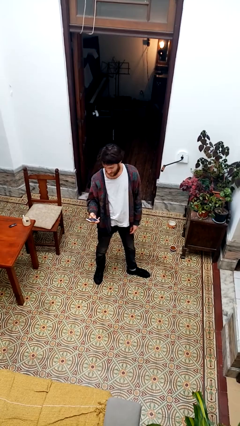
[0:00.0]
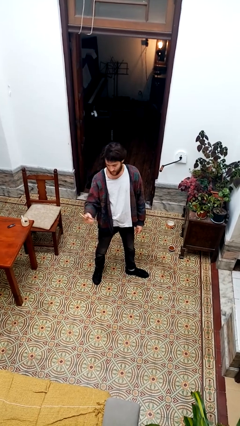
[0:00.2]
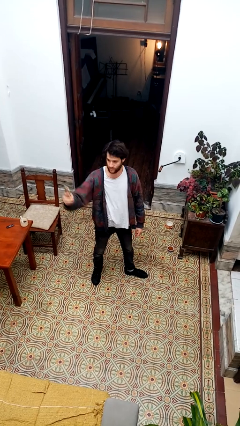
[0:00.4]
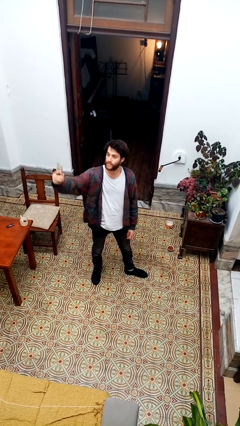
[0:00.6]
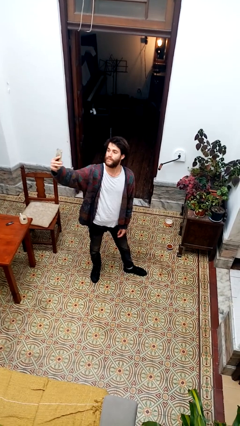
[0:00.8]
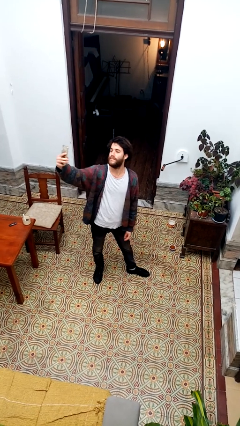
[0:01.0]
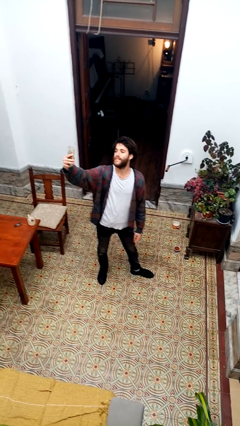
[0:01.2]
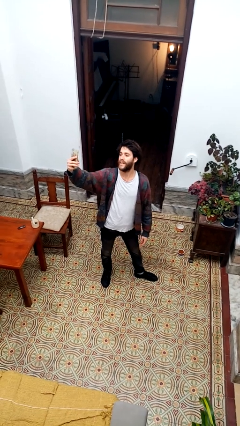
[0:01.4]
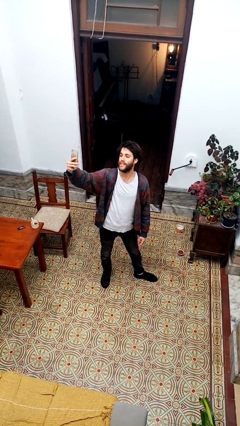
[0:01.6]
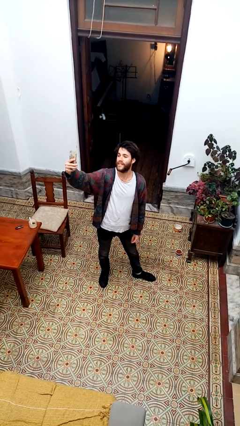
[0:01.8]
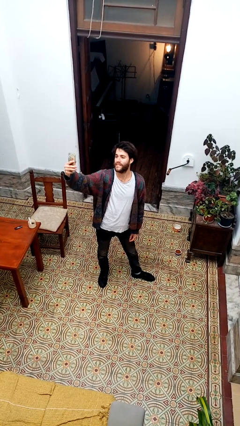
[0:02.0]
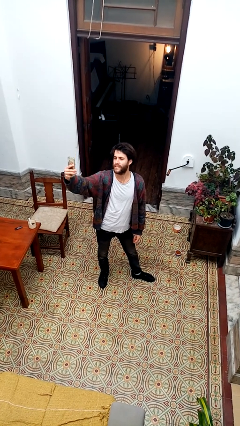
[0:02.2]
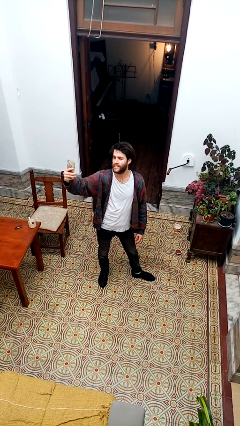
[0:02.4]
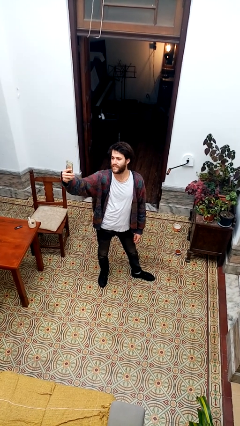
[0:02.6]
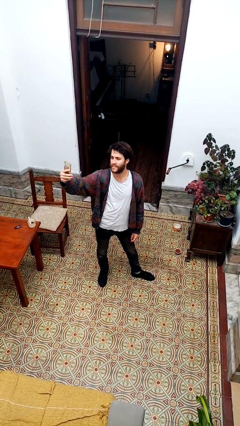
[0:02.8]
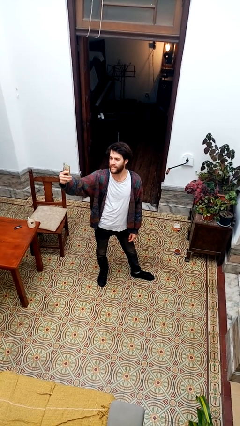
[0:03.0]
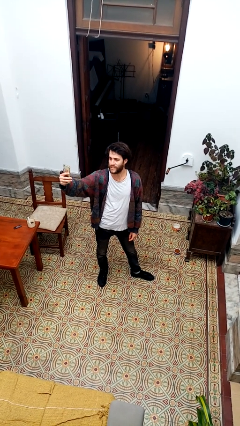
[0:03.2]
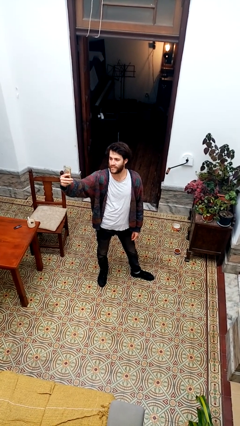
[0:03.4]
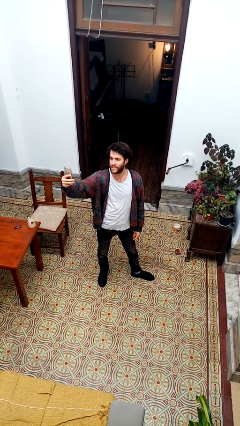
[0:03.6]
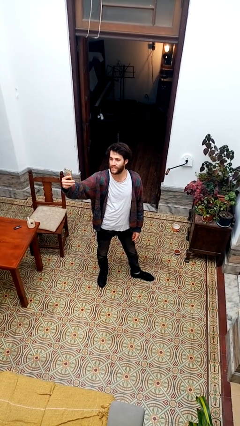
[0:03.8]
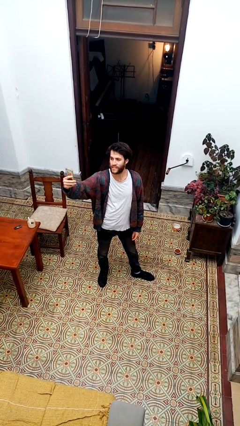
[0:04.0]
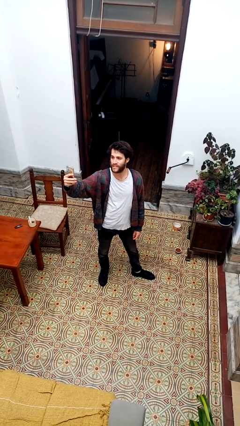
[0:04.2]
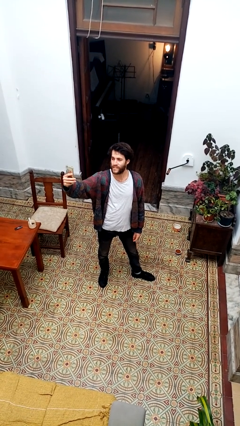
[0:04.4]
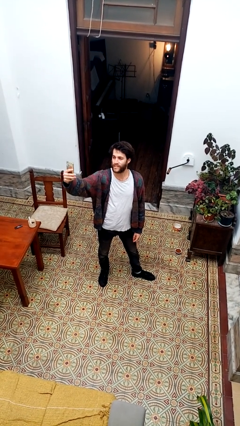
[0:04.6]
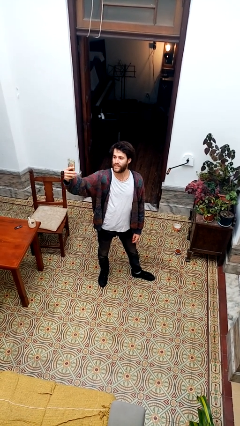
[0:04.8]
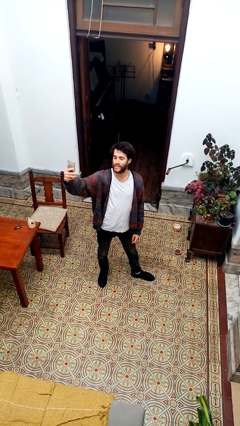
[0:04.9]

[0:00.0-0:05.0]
person takes selfie

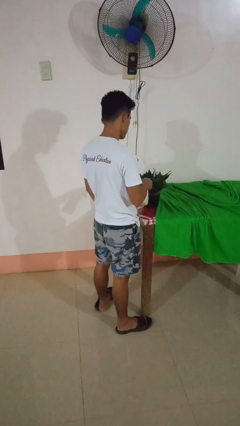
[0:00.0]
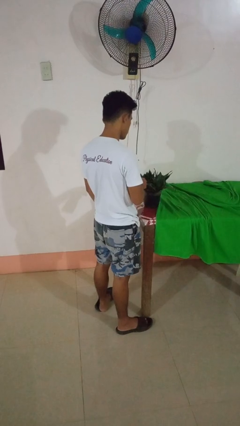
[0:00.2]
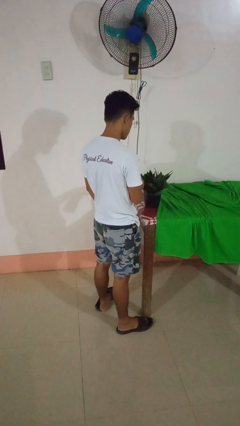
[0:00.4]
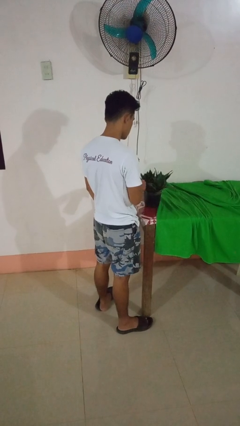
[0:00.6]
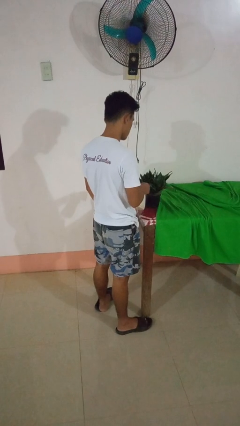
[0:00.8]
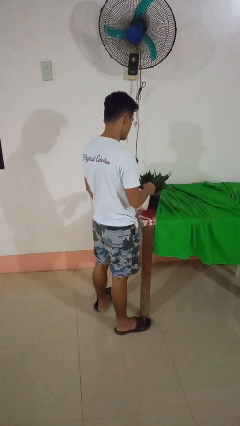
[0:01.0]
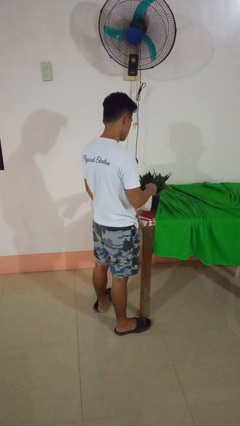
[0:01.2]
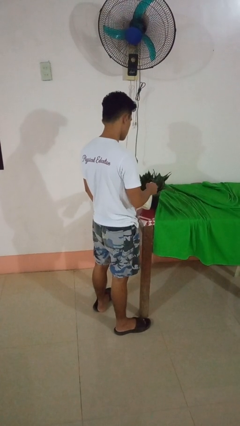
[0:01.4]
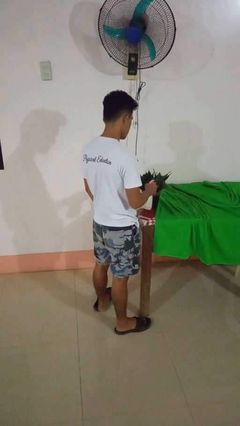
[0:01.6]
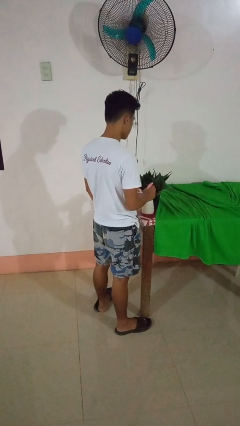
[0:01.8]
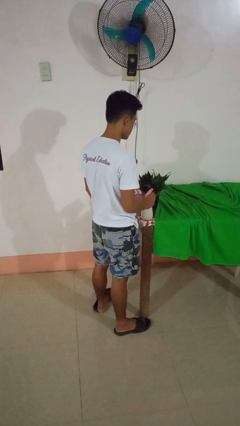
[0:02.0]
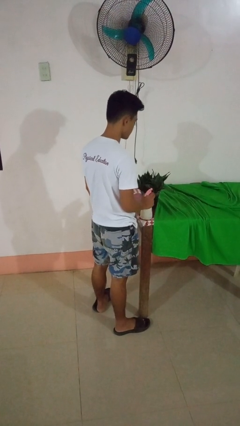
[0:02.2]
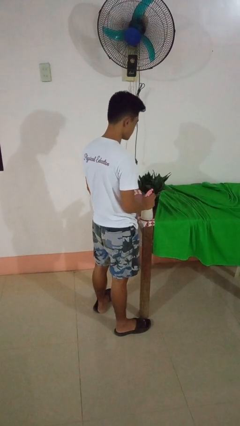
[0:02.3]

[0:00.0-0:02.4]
person waters houseplant

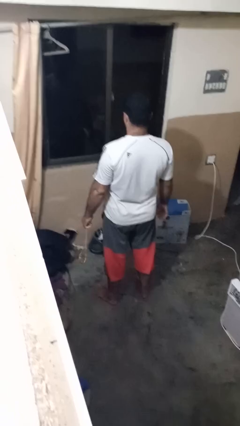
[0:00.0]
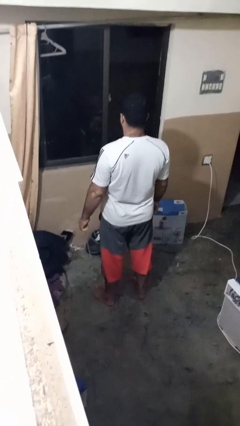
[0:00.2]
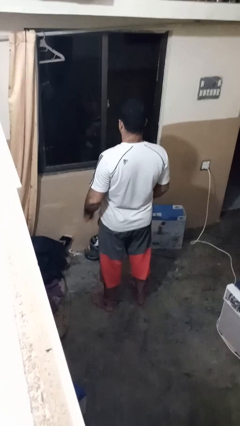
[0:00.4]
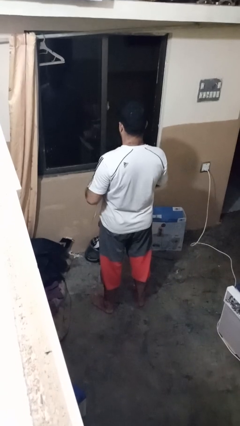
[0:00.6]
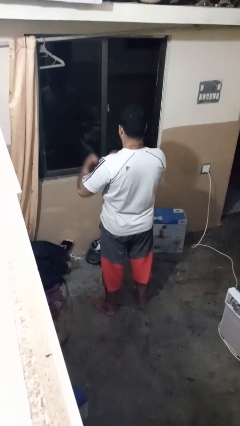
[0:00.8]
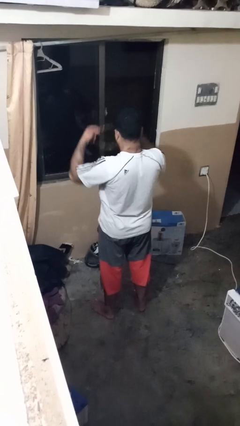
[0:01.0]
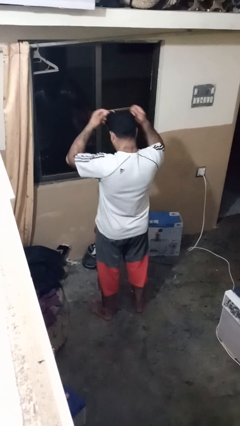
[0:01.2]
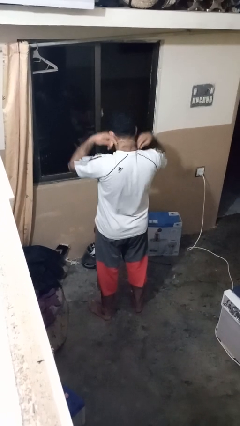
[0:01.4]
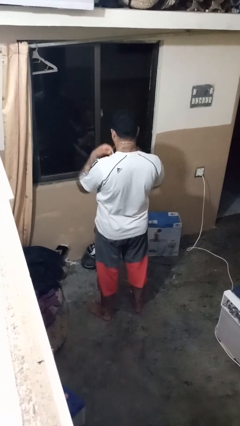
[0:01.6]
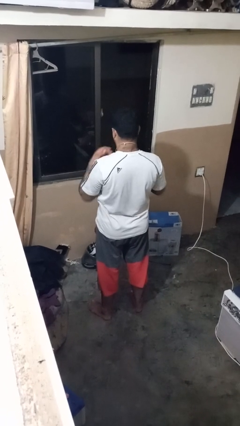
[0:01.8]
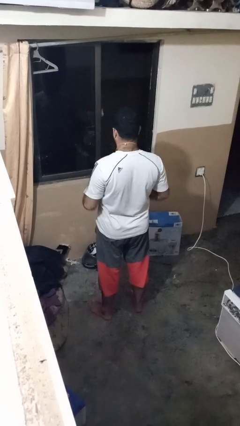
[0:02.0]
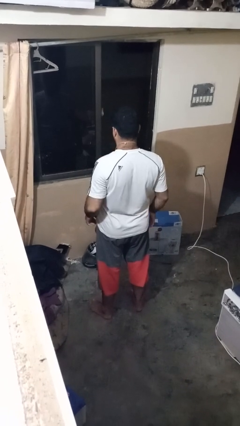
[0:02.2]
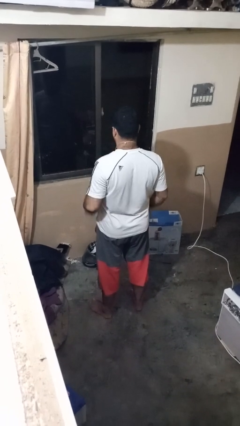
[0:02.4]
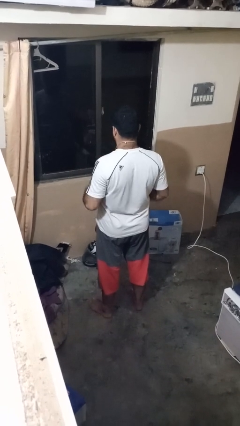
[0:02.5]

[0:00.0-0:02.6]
person puts on necklace

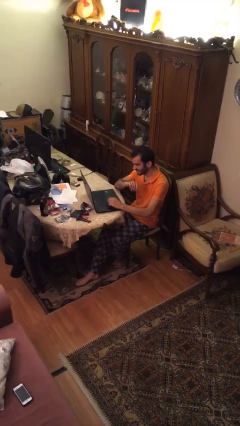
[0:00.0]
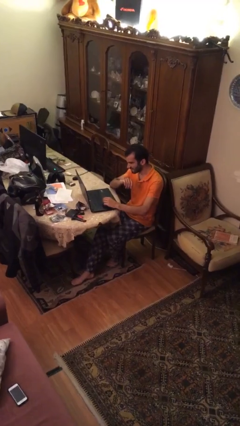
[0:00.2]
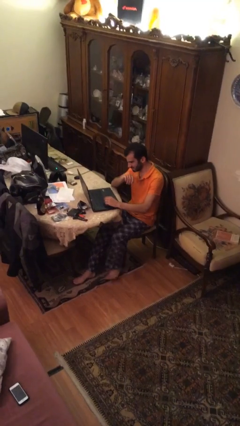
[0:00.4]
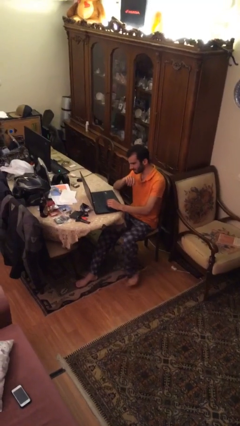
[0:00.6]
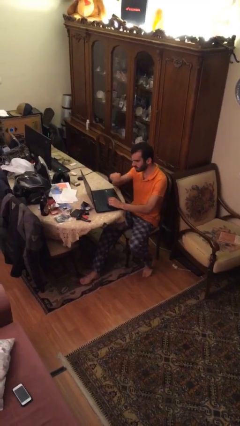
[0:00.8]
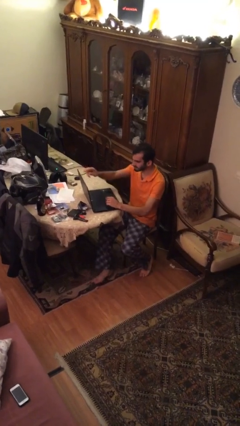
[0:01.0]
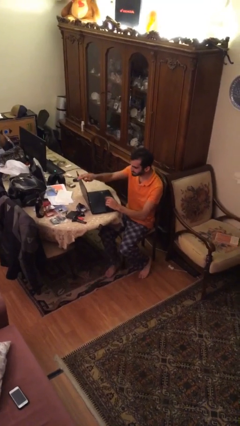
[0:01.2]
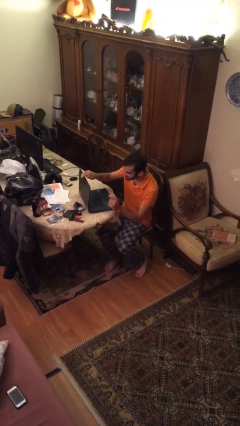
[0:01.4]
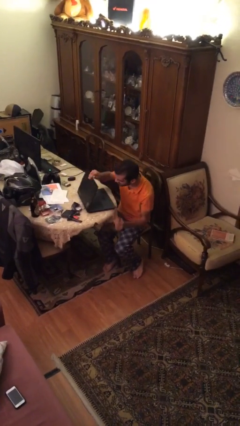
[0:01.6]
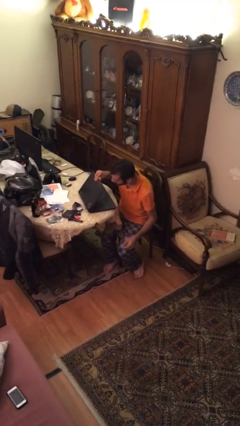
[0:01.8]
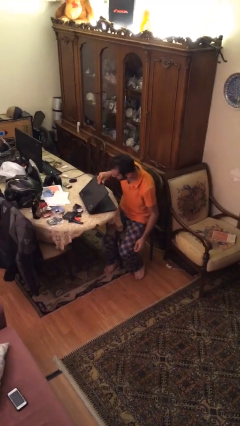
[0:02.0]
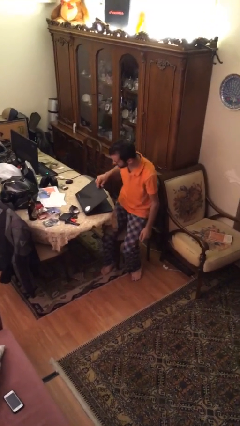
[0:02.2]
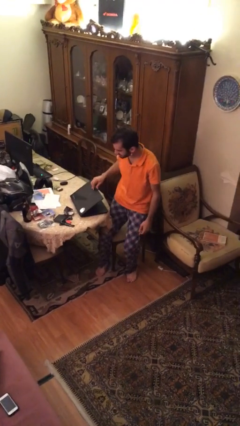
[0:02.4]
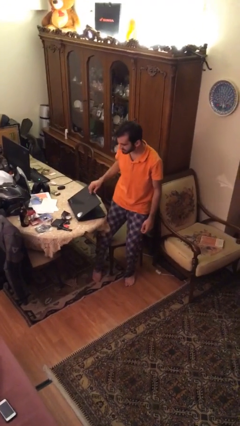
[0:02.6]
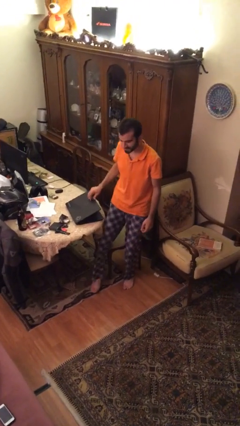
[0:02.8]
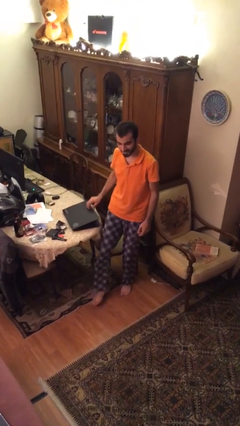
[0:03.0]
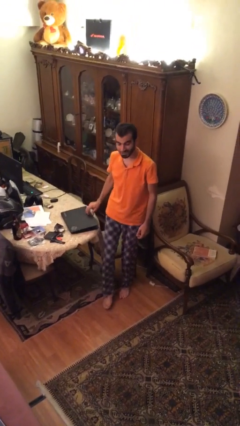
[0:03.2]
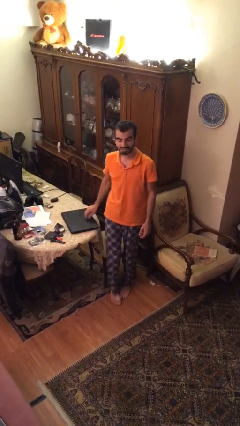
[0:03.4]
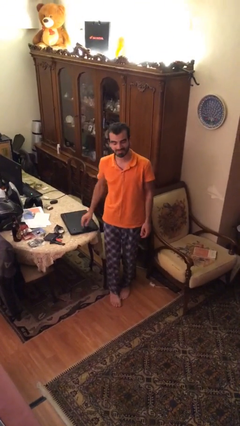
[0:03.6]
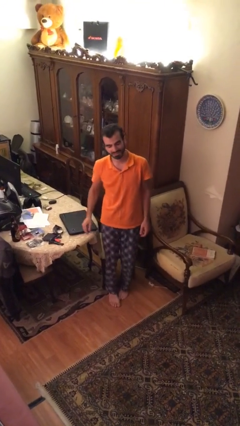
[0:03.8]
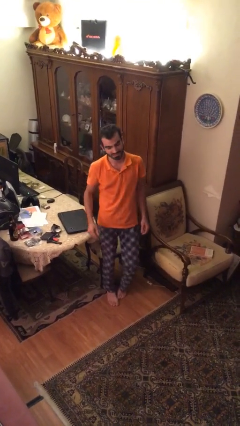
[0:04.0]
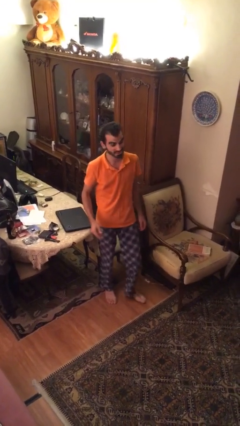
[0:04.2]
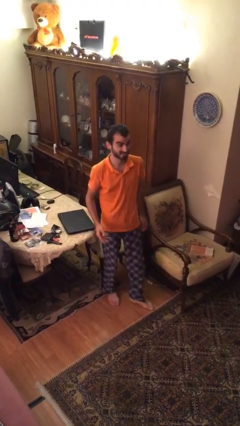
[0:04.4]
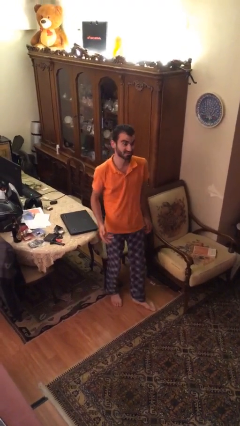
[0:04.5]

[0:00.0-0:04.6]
person stands up

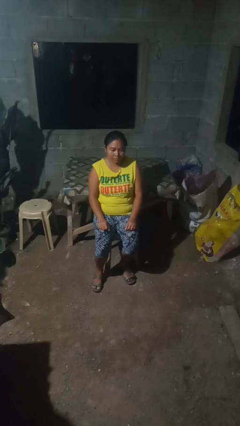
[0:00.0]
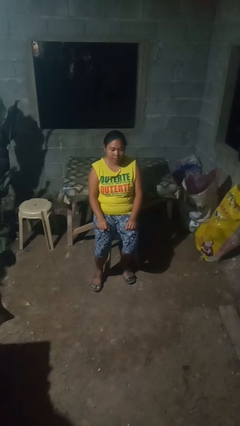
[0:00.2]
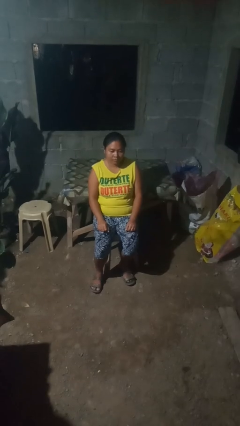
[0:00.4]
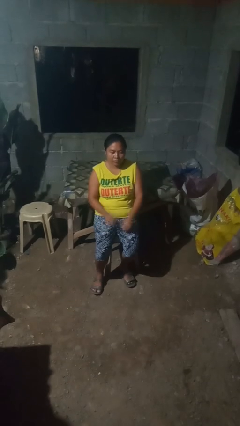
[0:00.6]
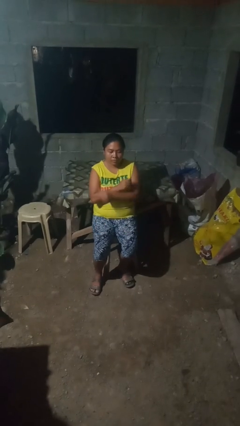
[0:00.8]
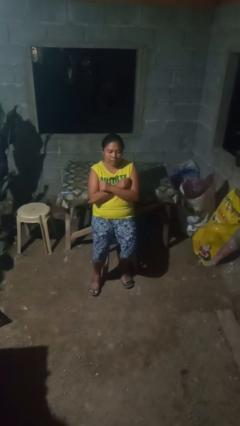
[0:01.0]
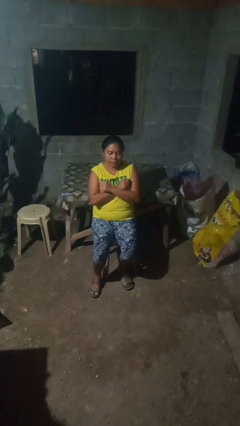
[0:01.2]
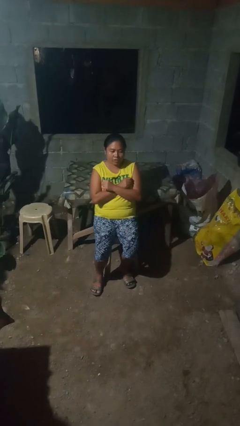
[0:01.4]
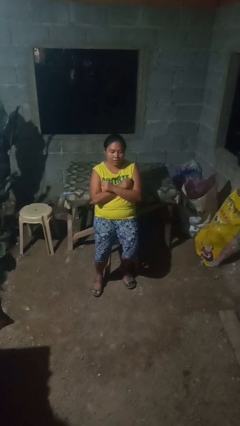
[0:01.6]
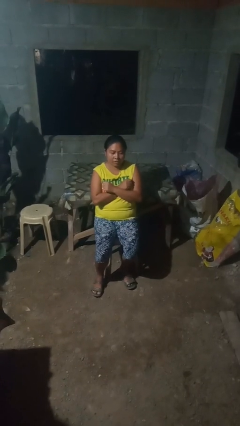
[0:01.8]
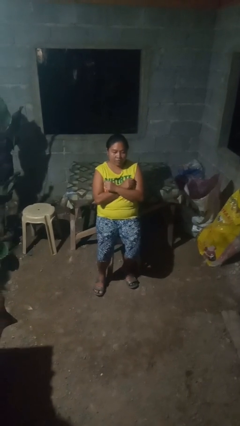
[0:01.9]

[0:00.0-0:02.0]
person crosses arms

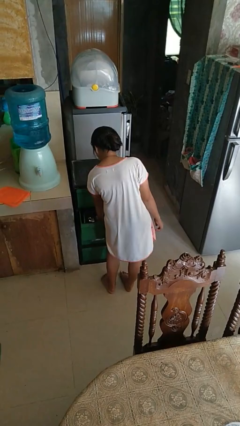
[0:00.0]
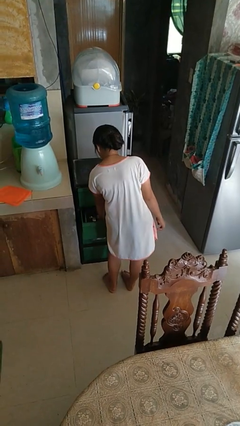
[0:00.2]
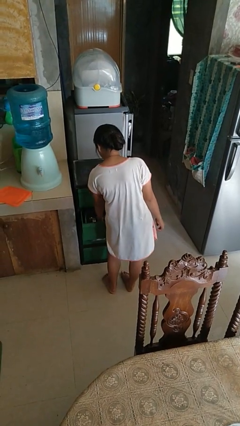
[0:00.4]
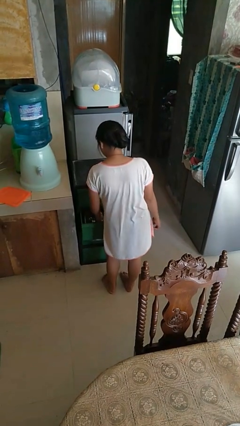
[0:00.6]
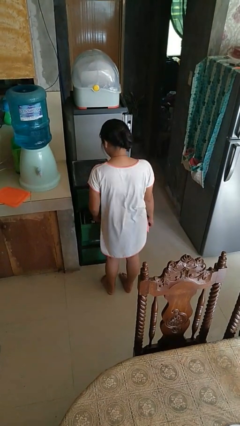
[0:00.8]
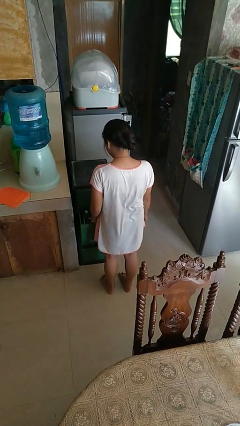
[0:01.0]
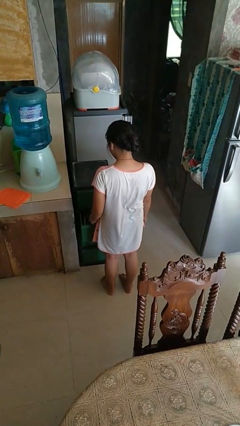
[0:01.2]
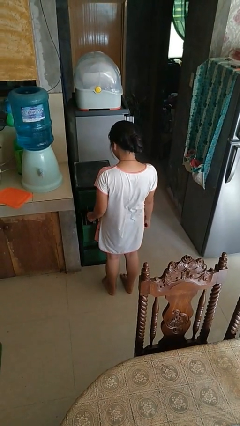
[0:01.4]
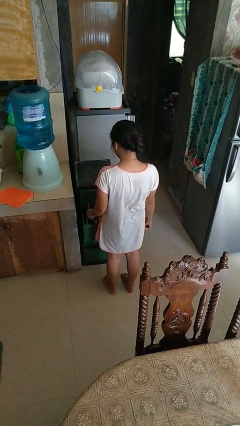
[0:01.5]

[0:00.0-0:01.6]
person takes object from kitchen drawer
